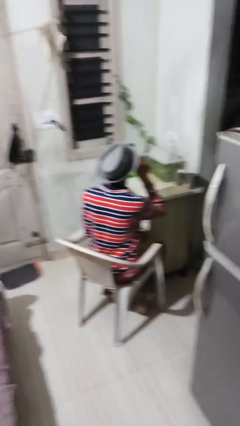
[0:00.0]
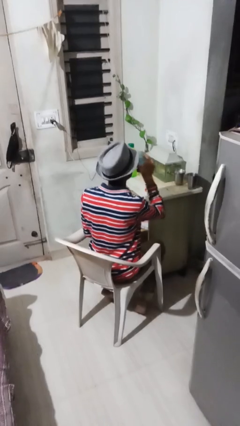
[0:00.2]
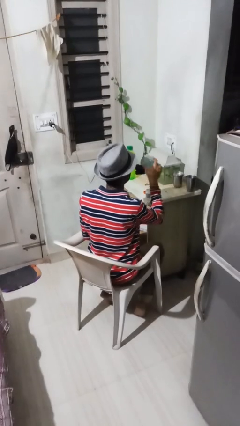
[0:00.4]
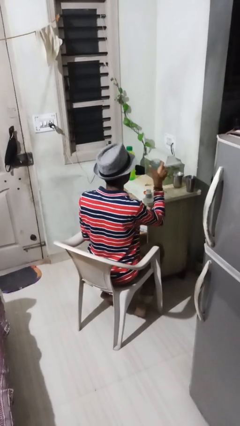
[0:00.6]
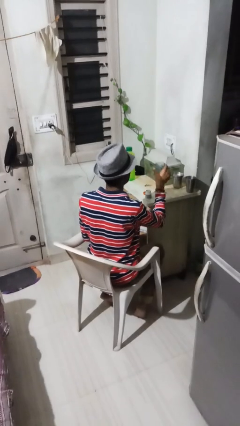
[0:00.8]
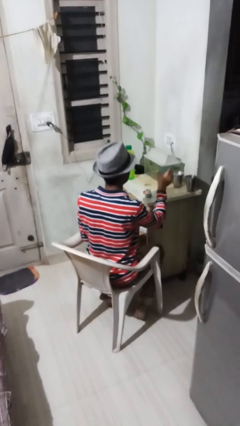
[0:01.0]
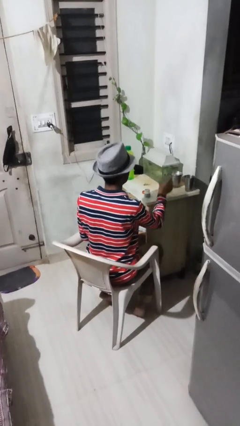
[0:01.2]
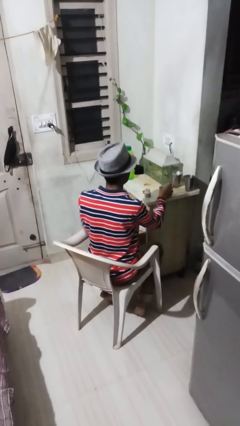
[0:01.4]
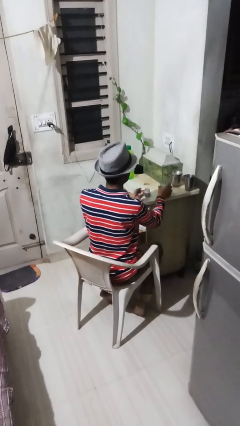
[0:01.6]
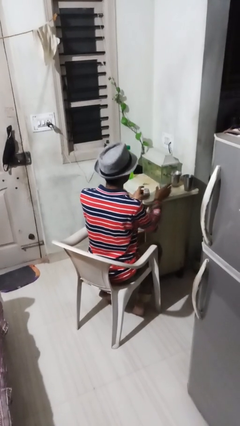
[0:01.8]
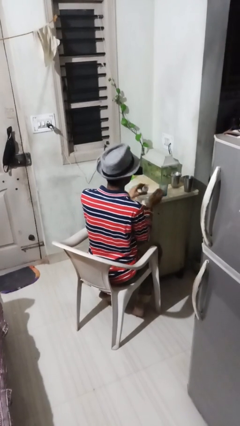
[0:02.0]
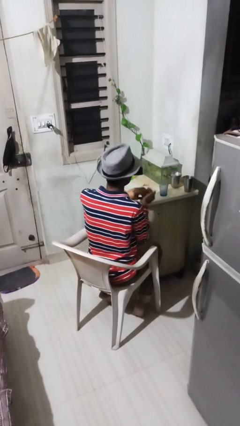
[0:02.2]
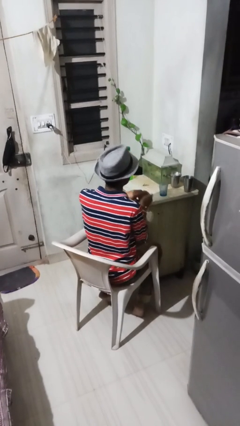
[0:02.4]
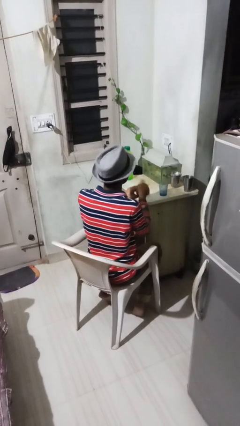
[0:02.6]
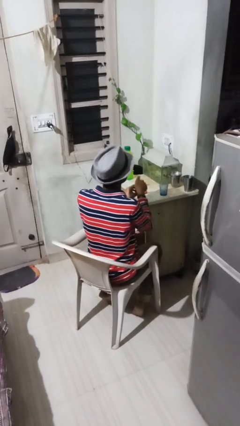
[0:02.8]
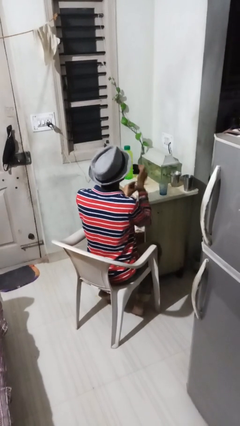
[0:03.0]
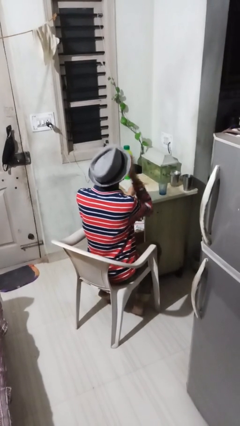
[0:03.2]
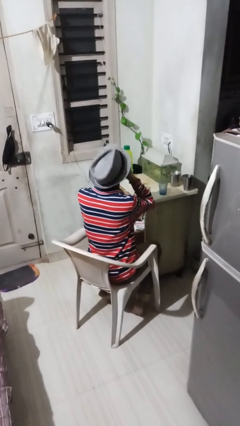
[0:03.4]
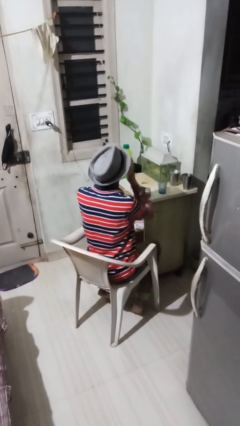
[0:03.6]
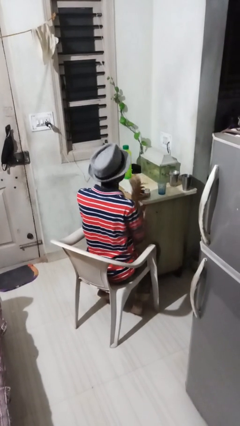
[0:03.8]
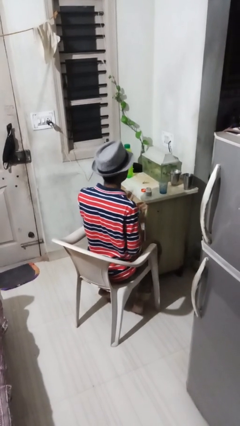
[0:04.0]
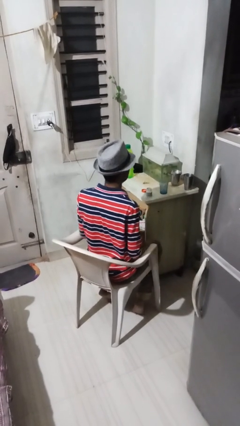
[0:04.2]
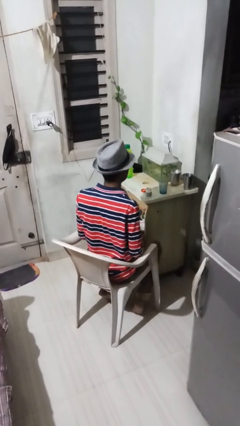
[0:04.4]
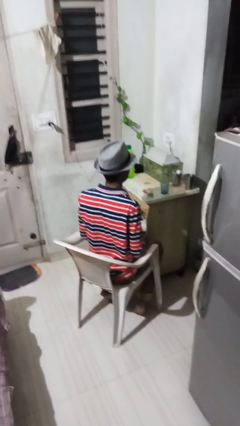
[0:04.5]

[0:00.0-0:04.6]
person takes medicine pills

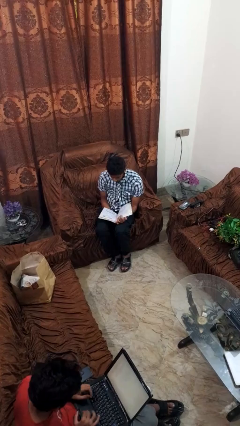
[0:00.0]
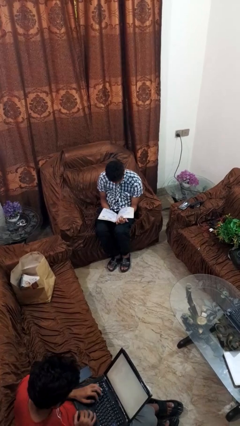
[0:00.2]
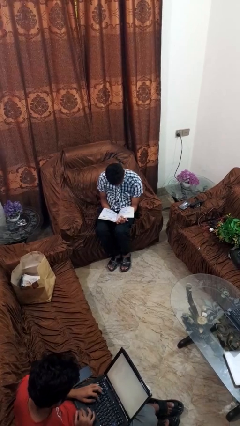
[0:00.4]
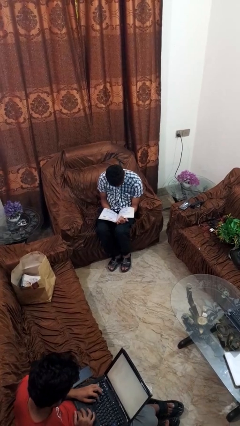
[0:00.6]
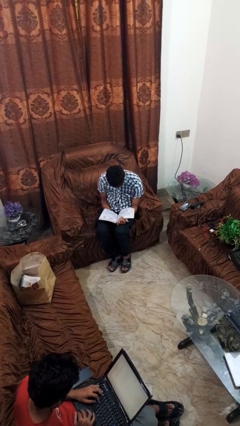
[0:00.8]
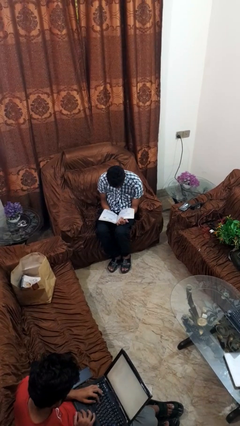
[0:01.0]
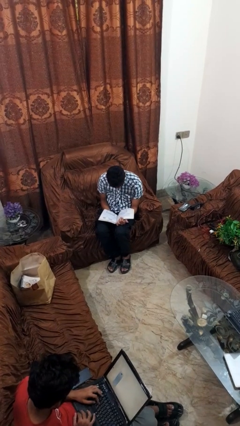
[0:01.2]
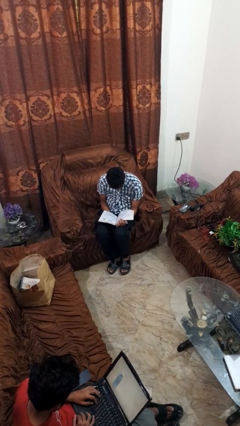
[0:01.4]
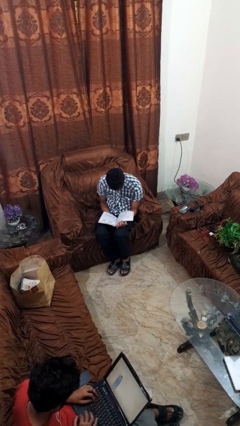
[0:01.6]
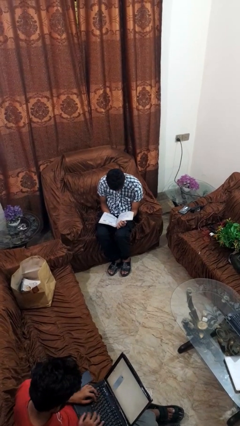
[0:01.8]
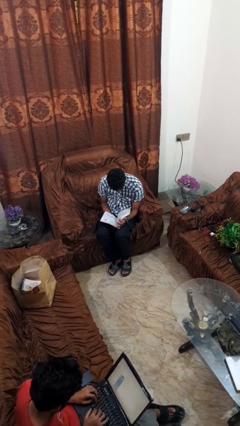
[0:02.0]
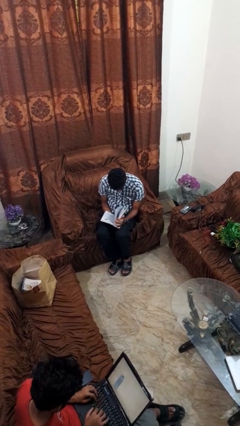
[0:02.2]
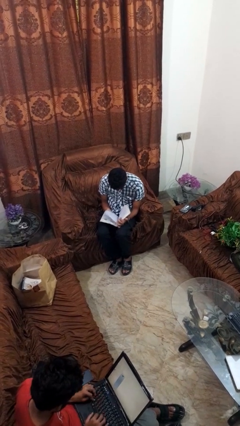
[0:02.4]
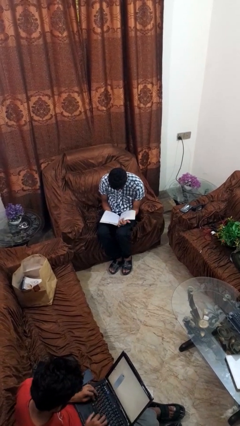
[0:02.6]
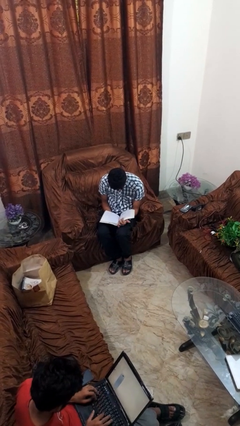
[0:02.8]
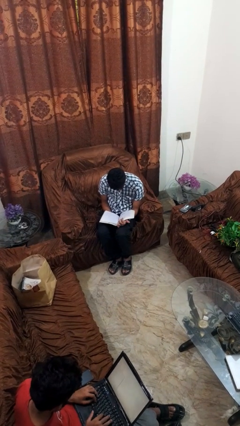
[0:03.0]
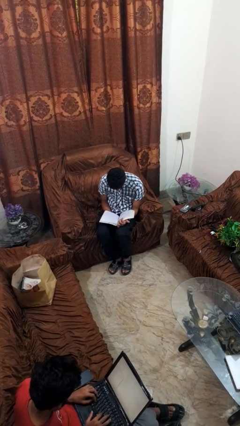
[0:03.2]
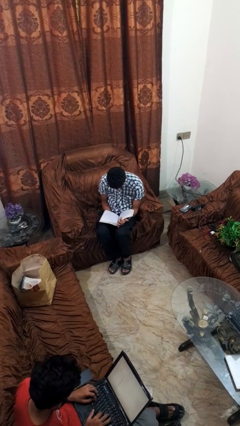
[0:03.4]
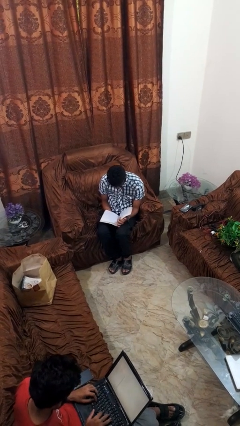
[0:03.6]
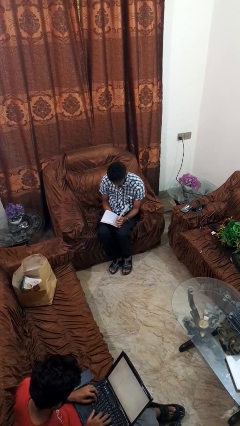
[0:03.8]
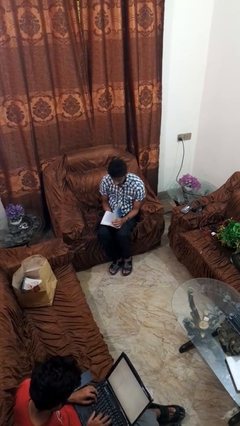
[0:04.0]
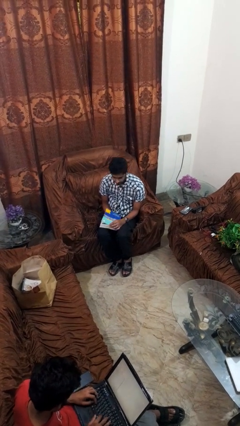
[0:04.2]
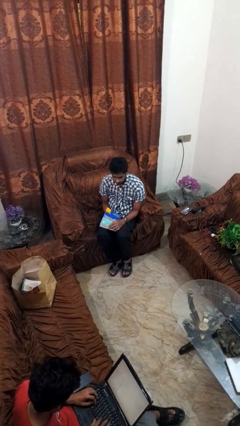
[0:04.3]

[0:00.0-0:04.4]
person reads book

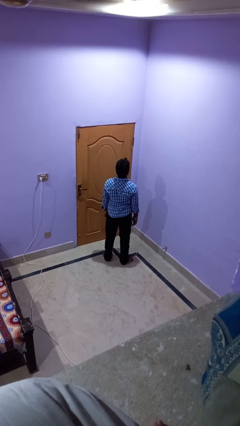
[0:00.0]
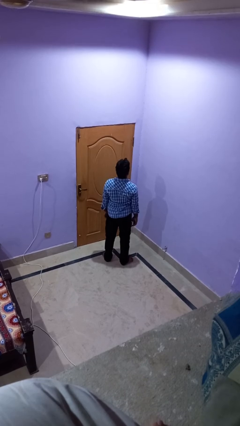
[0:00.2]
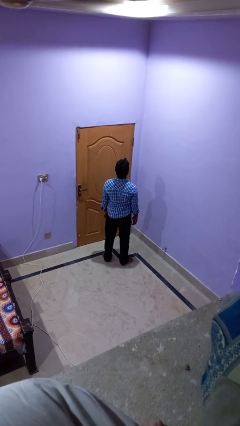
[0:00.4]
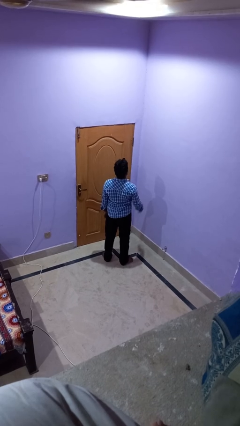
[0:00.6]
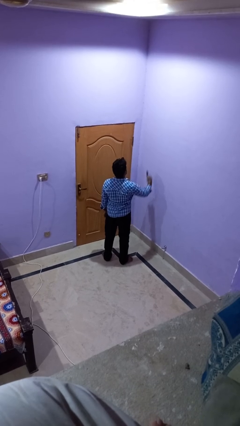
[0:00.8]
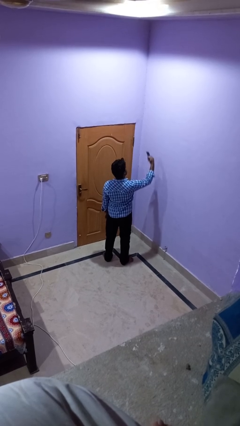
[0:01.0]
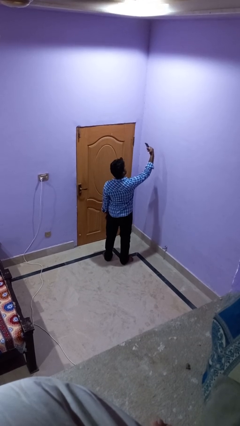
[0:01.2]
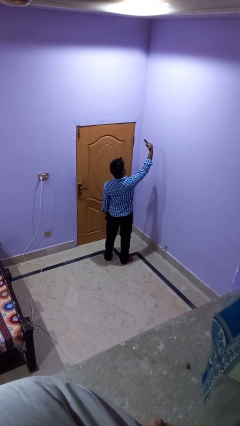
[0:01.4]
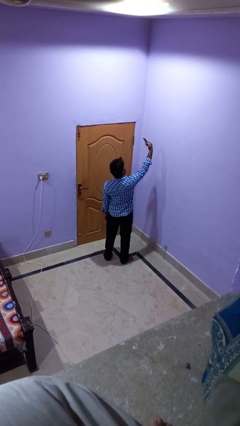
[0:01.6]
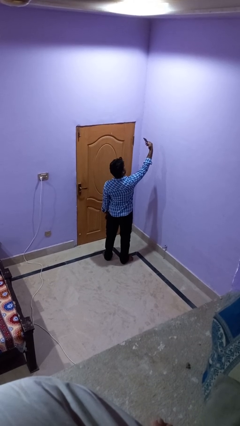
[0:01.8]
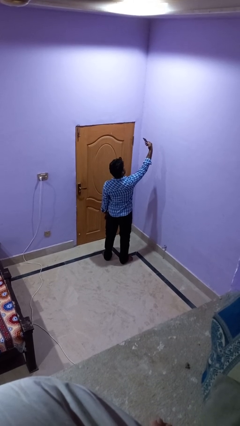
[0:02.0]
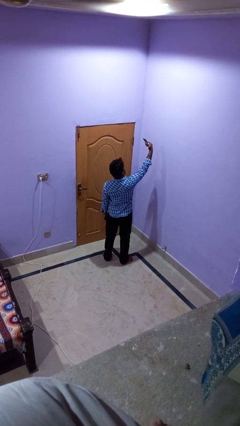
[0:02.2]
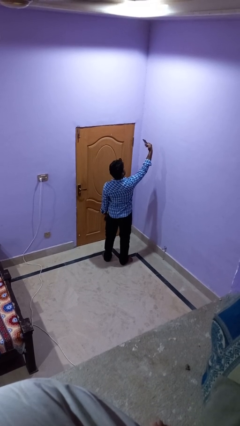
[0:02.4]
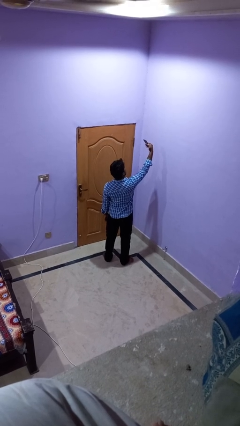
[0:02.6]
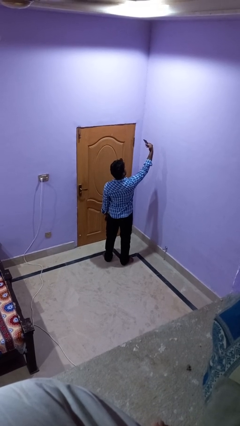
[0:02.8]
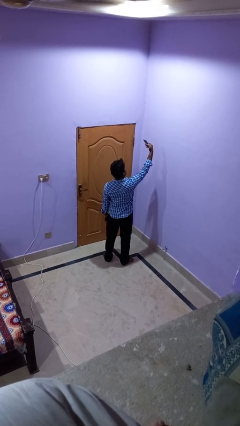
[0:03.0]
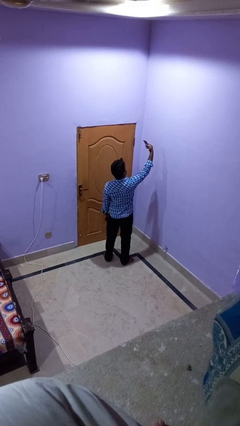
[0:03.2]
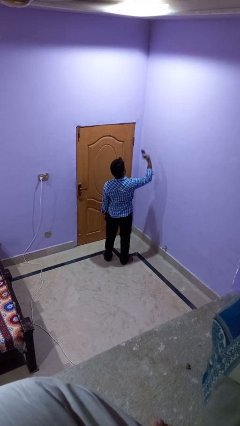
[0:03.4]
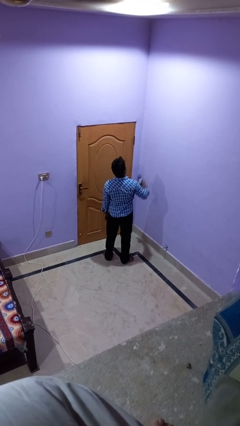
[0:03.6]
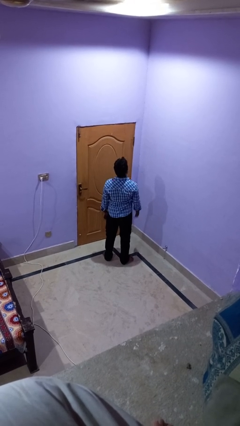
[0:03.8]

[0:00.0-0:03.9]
person takes selfie

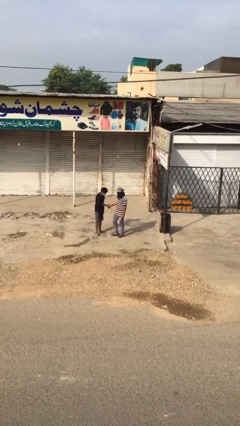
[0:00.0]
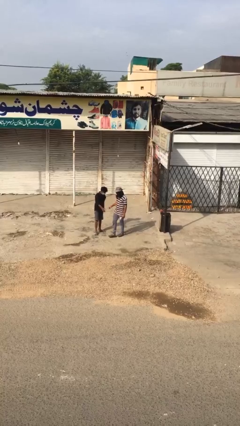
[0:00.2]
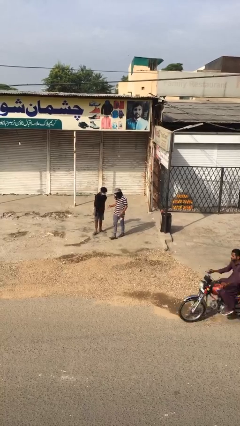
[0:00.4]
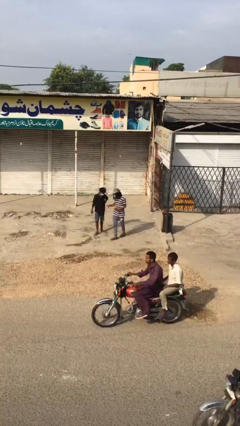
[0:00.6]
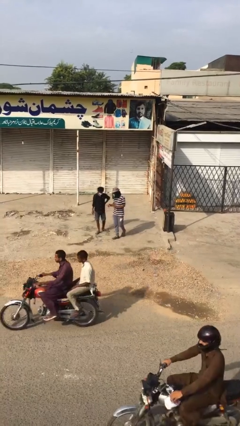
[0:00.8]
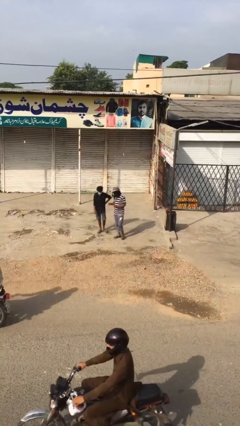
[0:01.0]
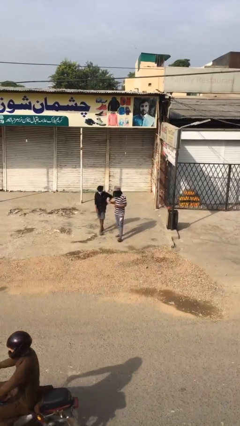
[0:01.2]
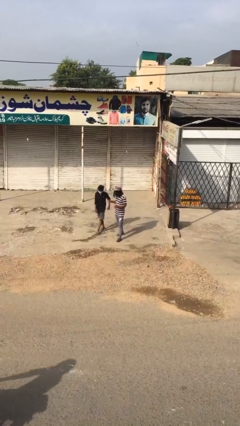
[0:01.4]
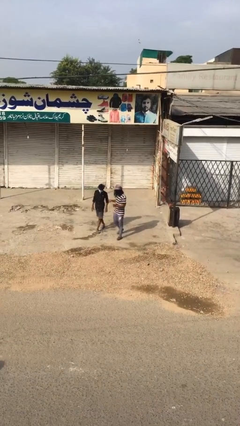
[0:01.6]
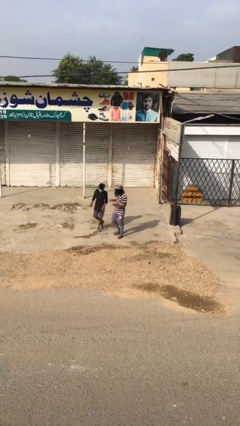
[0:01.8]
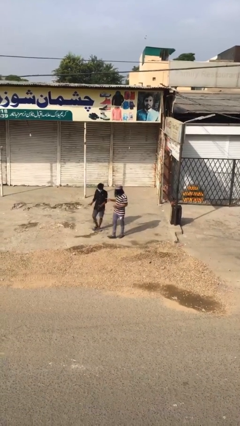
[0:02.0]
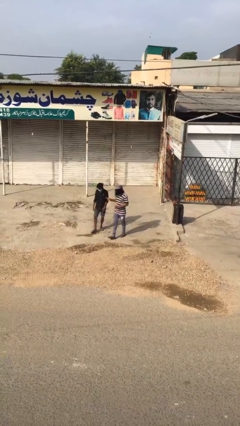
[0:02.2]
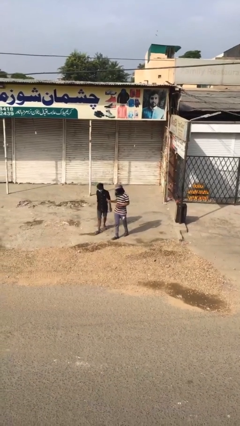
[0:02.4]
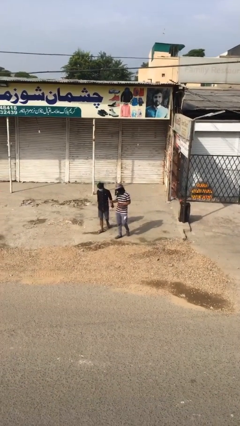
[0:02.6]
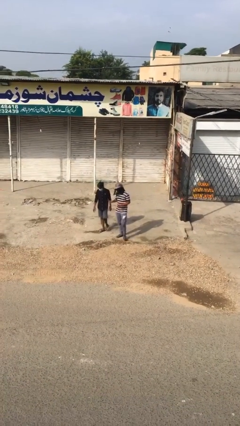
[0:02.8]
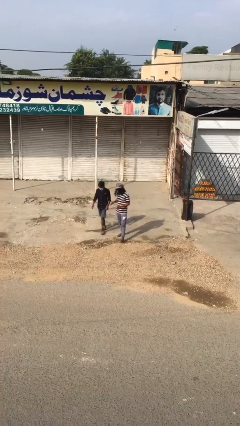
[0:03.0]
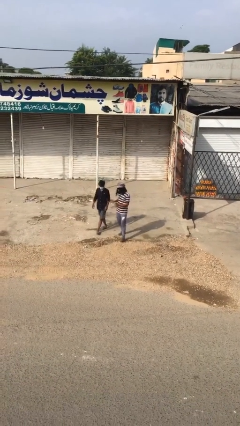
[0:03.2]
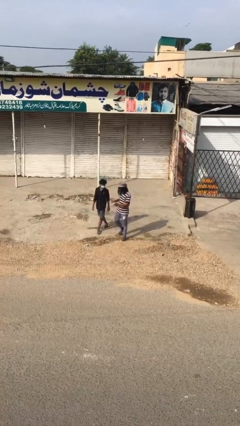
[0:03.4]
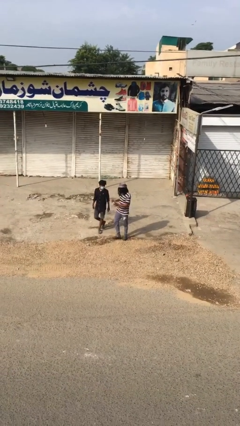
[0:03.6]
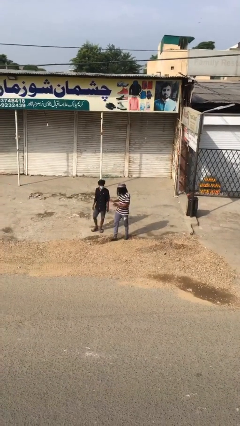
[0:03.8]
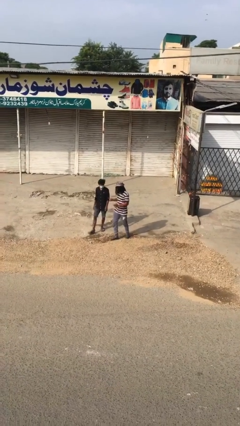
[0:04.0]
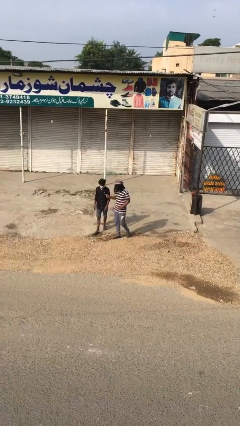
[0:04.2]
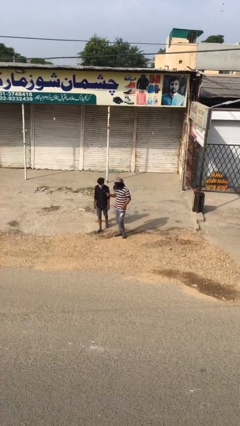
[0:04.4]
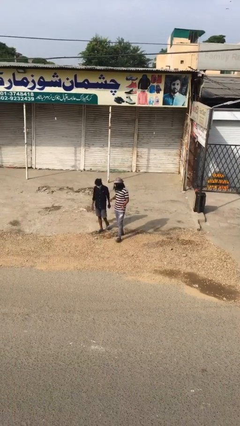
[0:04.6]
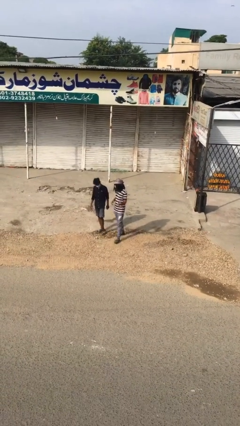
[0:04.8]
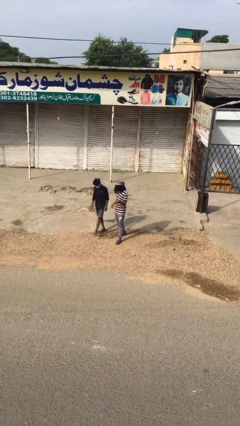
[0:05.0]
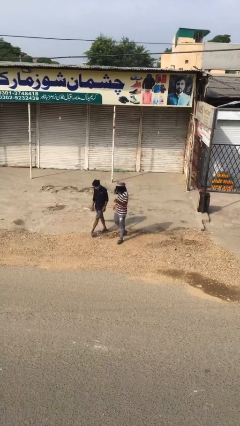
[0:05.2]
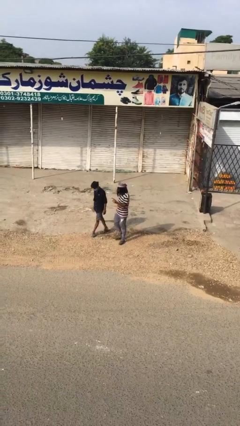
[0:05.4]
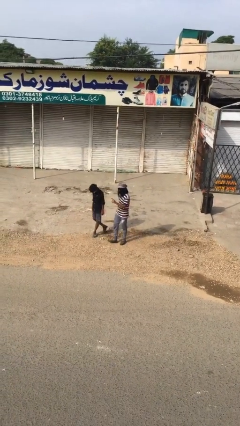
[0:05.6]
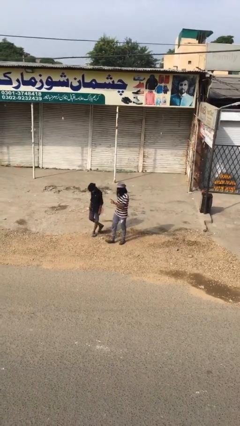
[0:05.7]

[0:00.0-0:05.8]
person talks to person
